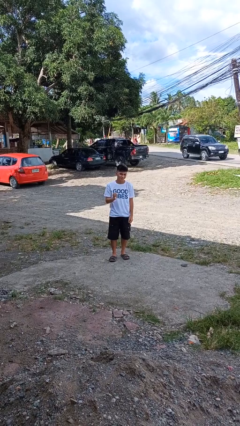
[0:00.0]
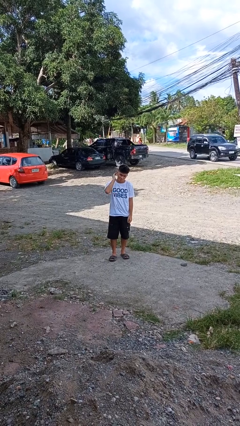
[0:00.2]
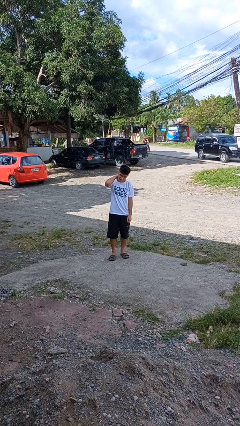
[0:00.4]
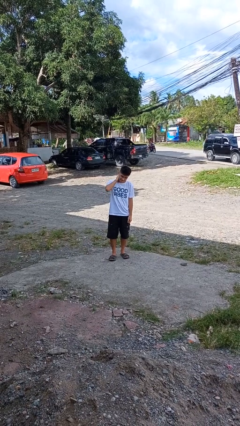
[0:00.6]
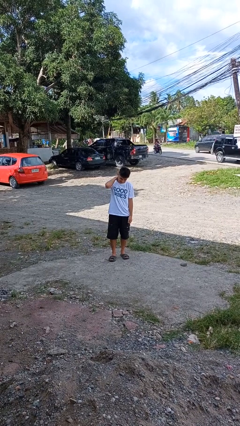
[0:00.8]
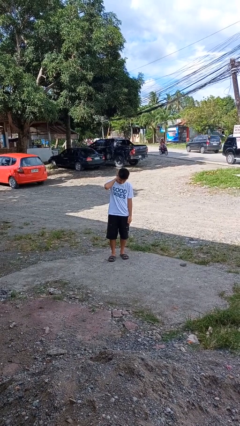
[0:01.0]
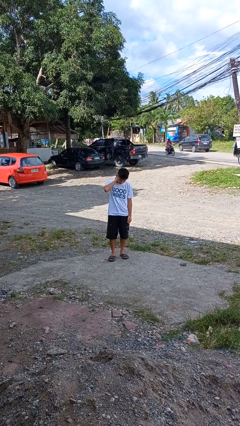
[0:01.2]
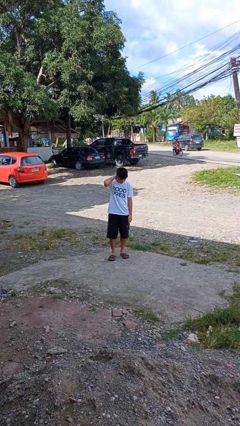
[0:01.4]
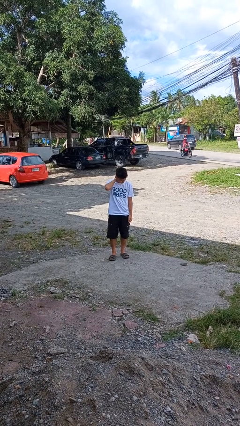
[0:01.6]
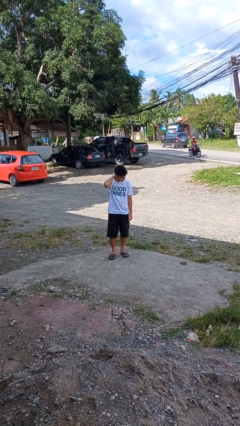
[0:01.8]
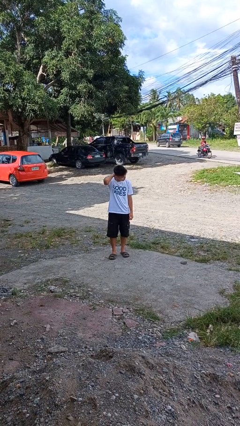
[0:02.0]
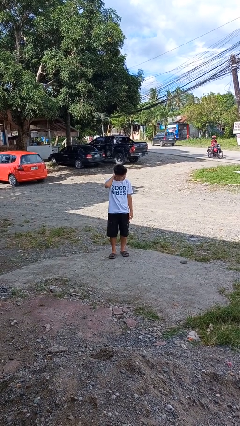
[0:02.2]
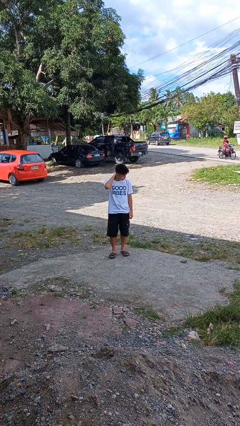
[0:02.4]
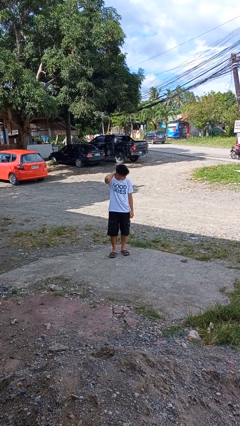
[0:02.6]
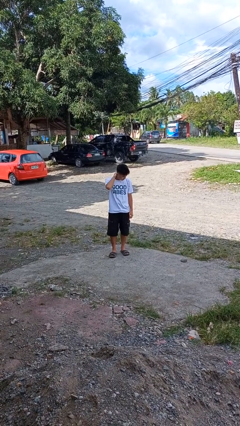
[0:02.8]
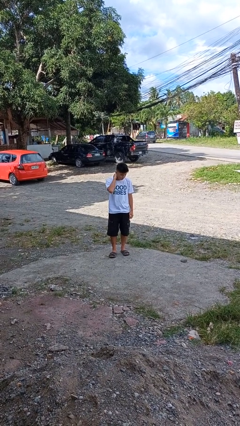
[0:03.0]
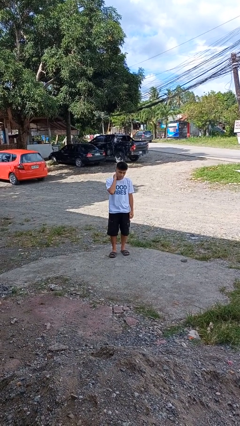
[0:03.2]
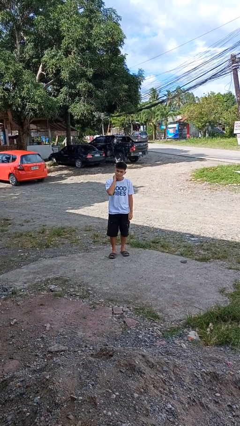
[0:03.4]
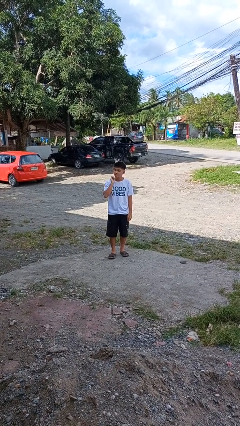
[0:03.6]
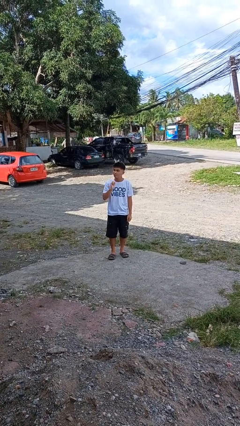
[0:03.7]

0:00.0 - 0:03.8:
person rubs neck

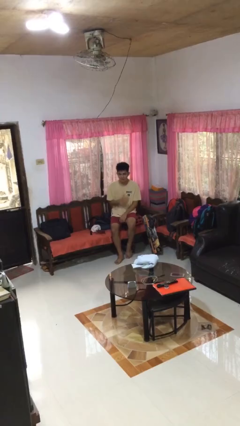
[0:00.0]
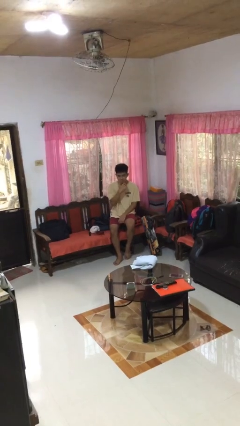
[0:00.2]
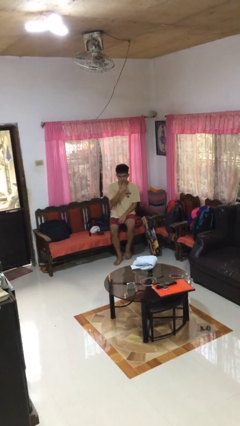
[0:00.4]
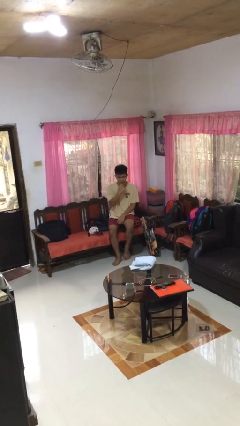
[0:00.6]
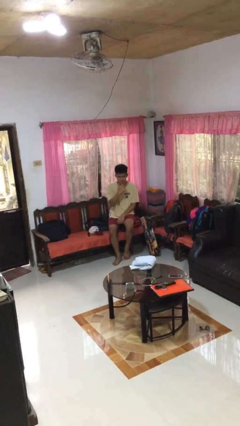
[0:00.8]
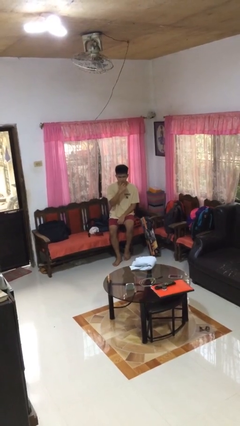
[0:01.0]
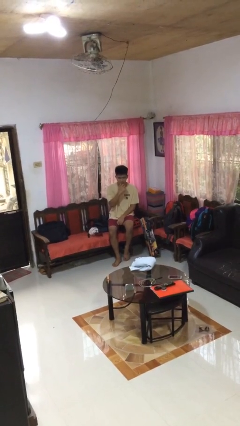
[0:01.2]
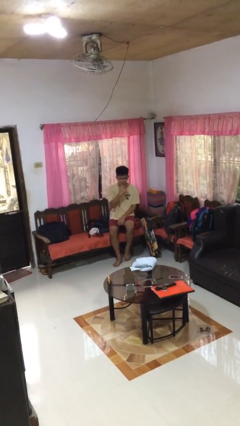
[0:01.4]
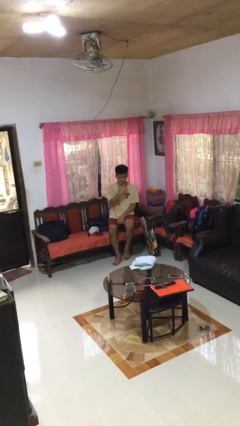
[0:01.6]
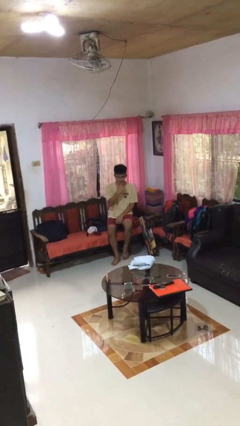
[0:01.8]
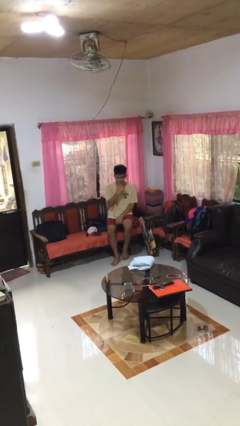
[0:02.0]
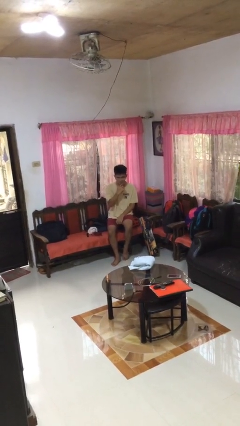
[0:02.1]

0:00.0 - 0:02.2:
person strokes chin

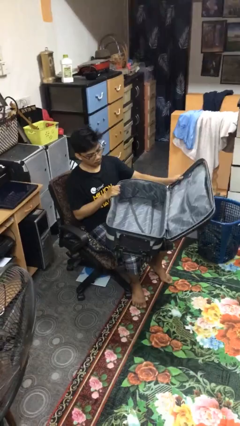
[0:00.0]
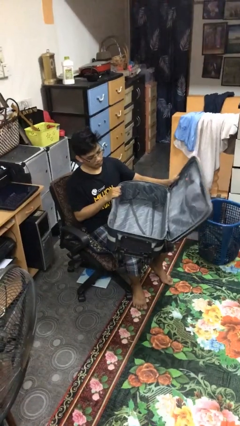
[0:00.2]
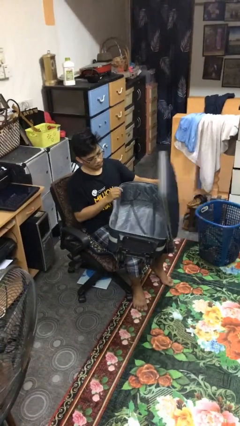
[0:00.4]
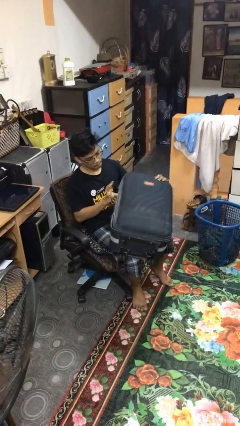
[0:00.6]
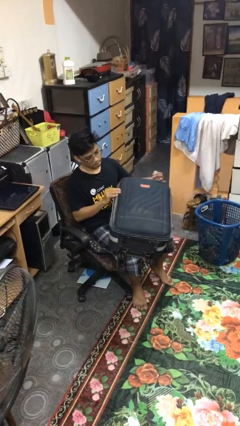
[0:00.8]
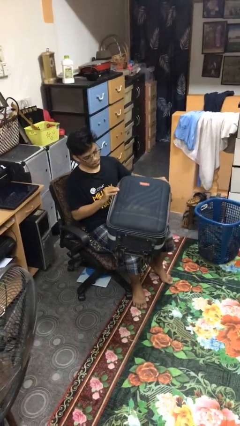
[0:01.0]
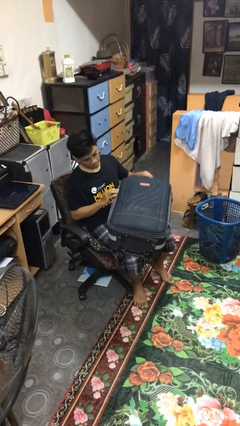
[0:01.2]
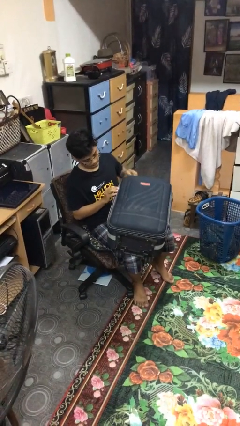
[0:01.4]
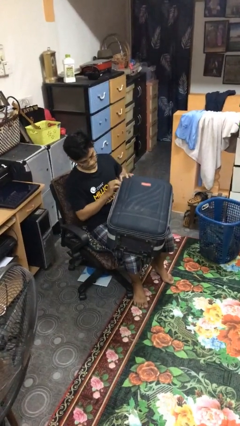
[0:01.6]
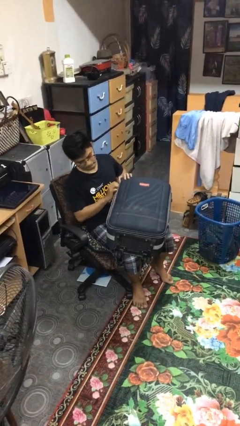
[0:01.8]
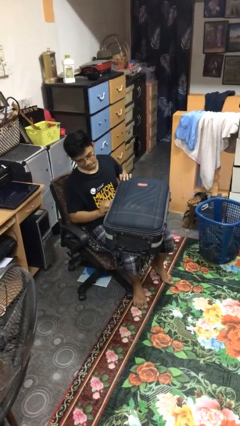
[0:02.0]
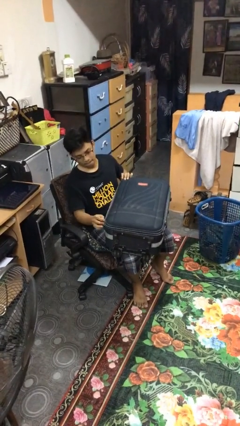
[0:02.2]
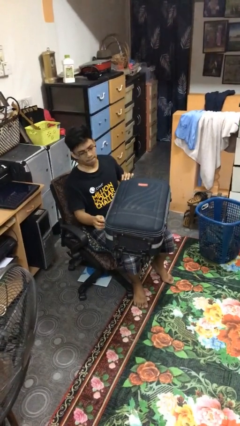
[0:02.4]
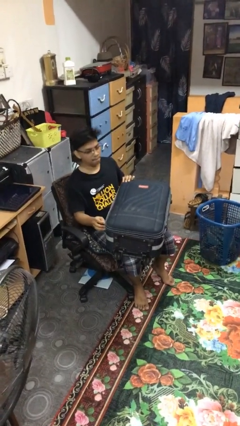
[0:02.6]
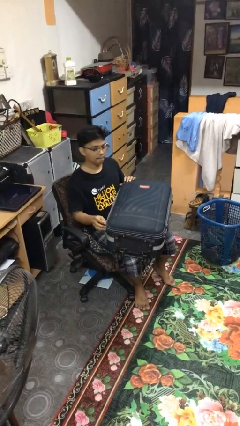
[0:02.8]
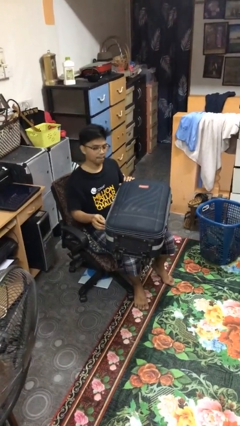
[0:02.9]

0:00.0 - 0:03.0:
person closes suitcase

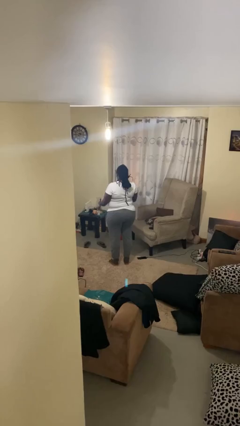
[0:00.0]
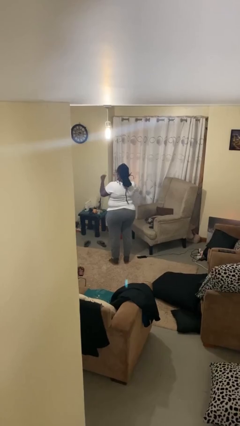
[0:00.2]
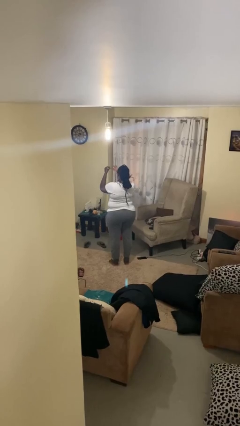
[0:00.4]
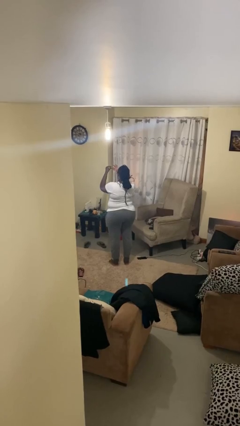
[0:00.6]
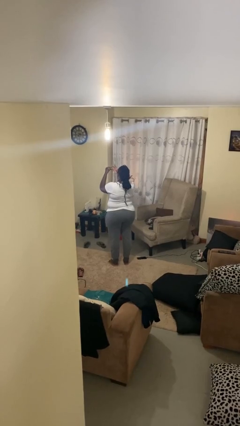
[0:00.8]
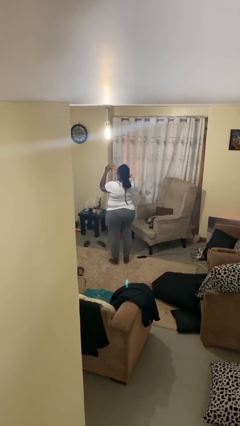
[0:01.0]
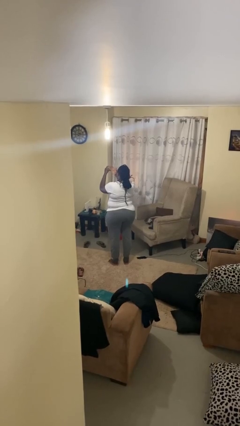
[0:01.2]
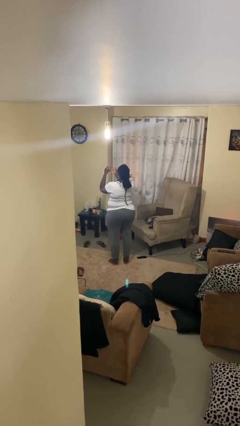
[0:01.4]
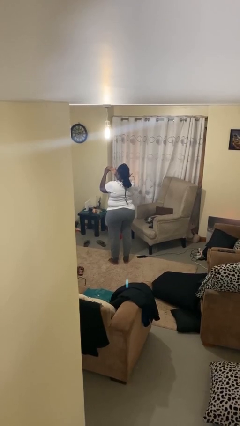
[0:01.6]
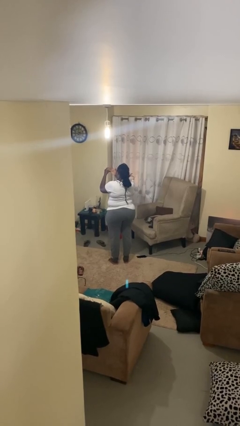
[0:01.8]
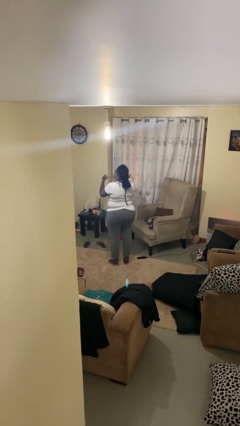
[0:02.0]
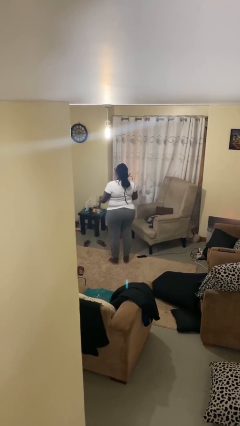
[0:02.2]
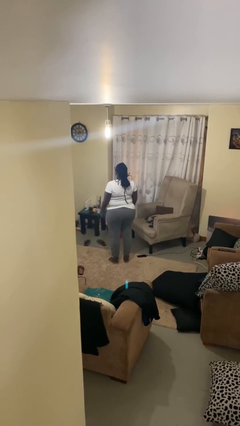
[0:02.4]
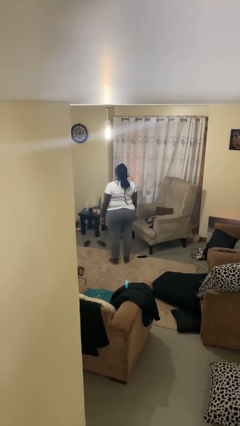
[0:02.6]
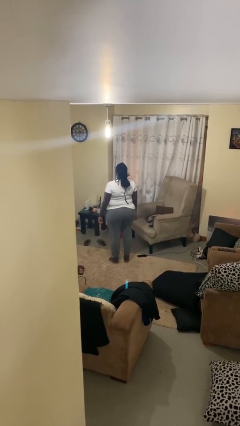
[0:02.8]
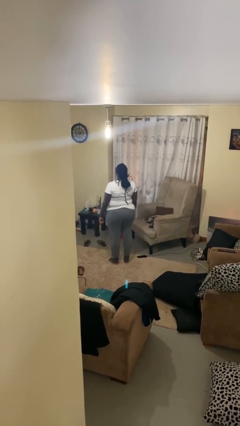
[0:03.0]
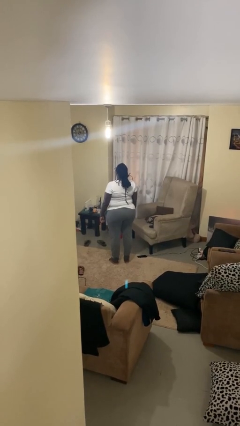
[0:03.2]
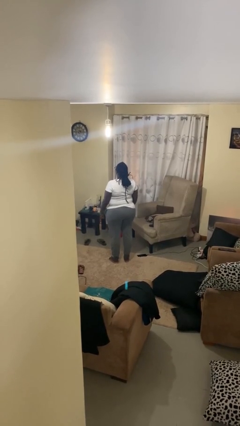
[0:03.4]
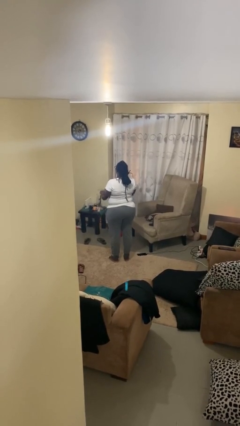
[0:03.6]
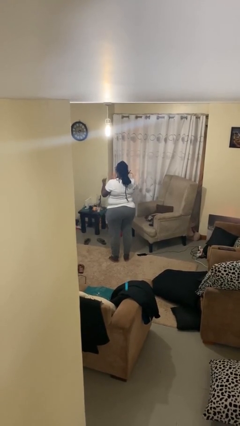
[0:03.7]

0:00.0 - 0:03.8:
person puts on ring

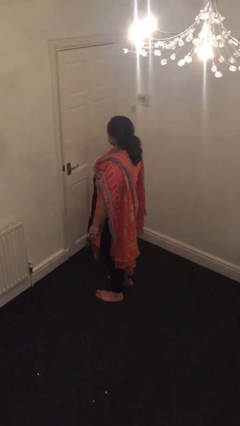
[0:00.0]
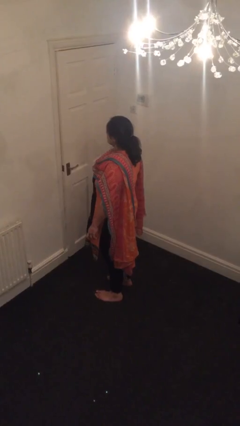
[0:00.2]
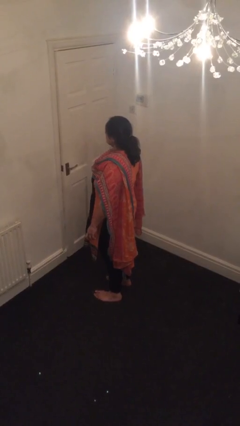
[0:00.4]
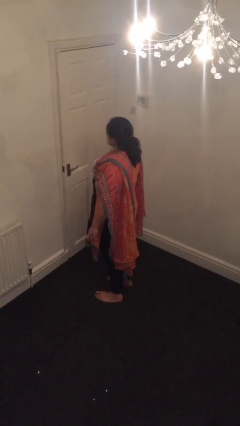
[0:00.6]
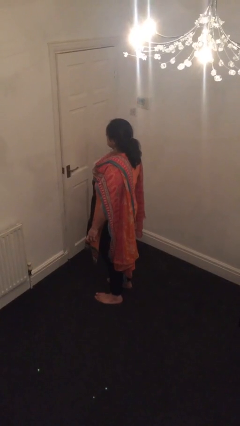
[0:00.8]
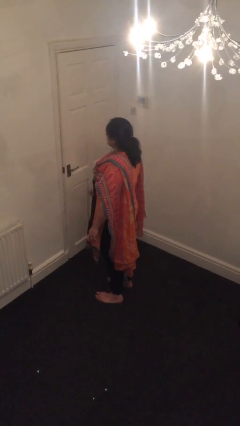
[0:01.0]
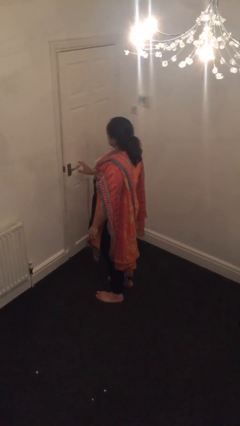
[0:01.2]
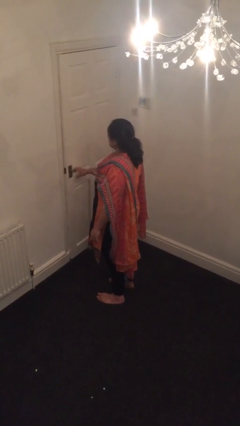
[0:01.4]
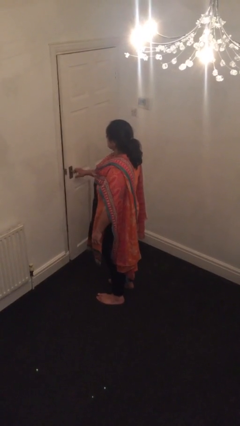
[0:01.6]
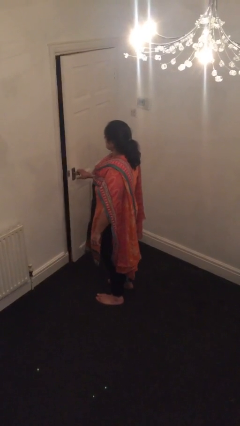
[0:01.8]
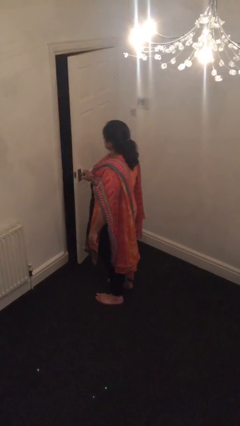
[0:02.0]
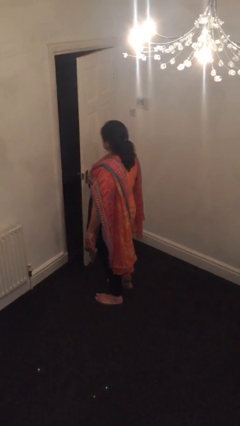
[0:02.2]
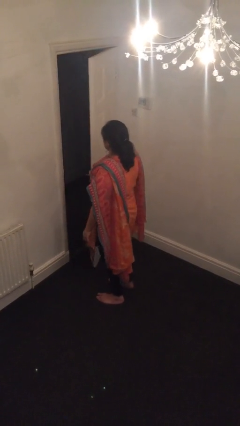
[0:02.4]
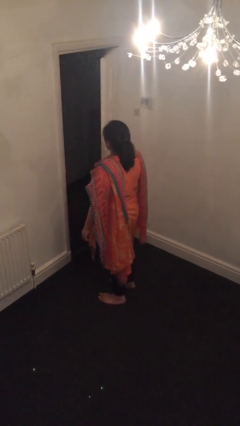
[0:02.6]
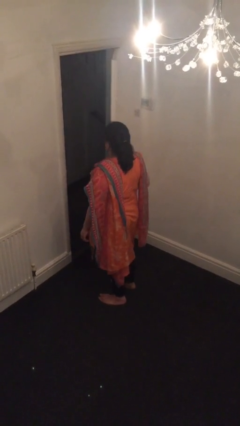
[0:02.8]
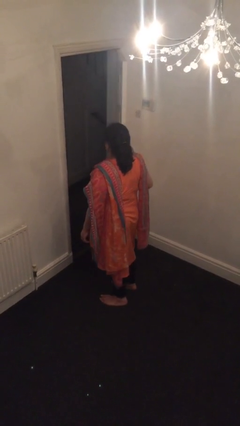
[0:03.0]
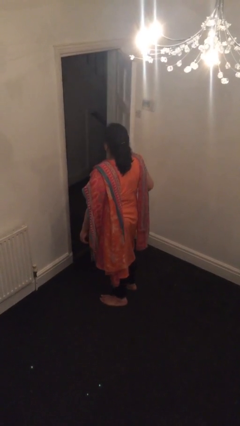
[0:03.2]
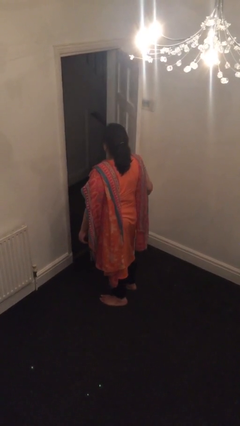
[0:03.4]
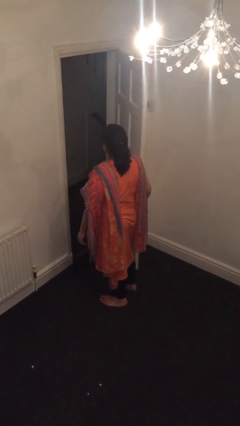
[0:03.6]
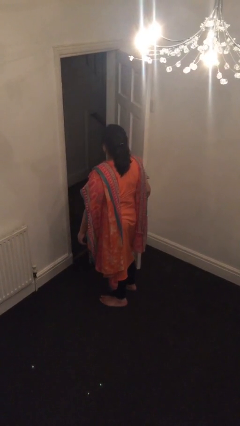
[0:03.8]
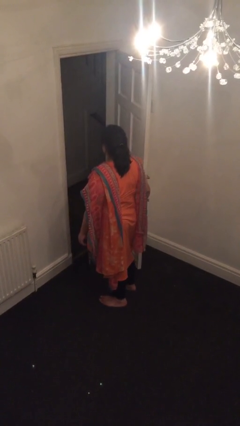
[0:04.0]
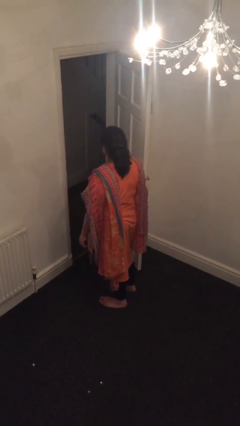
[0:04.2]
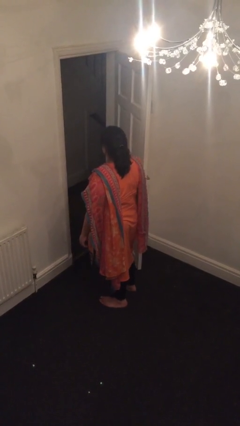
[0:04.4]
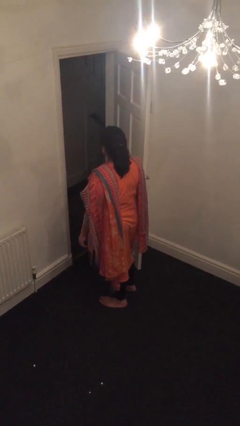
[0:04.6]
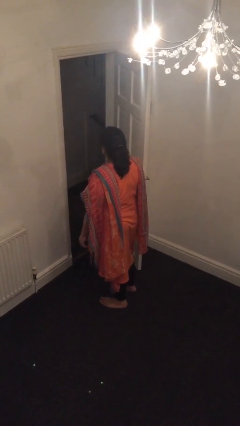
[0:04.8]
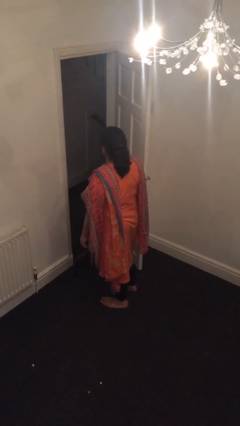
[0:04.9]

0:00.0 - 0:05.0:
person opens facility door
